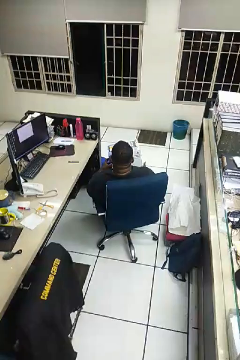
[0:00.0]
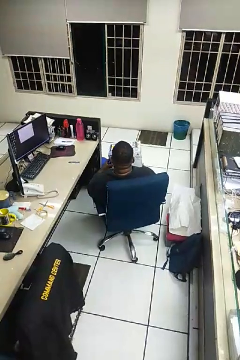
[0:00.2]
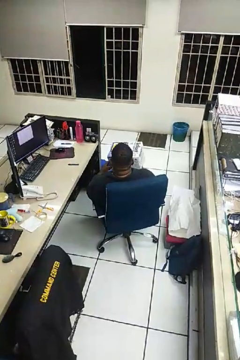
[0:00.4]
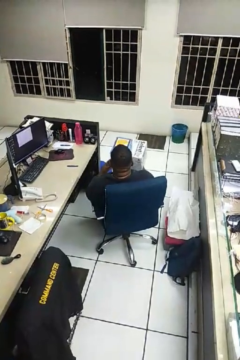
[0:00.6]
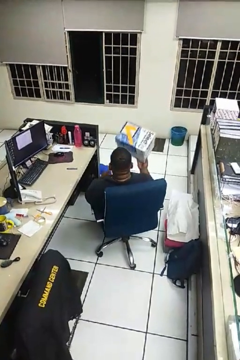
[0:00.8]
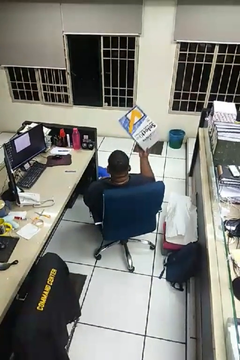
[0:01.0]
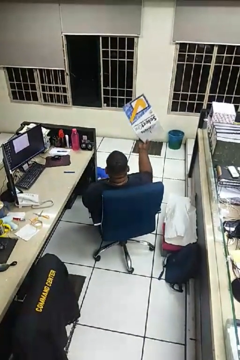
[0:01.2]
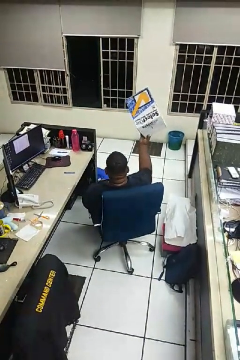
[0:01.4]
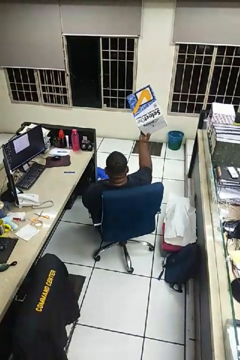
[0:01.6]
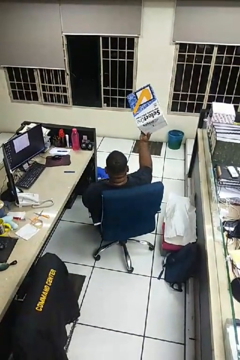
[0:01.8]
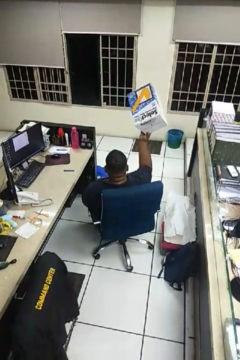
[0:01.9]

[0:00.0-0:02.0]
person holds object above head

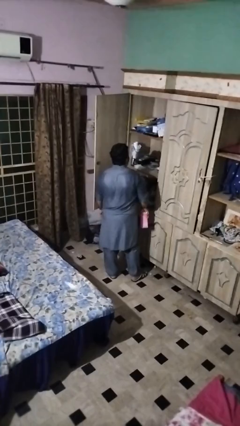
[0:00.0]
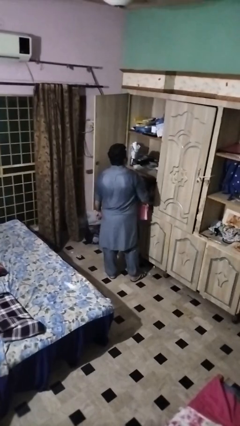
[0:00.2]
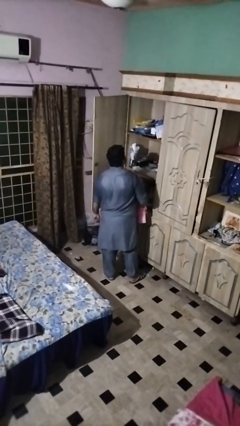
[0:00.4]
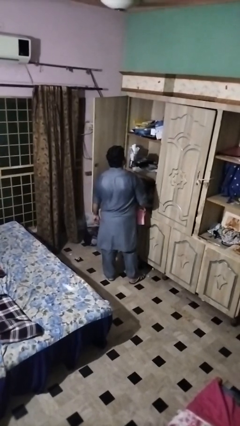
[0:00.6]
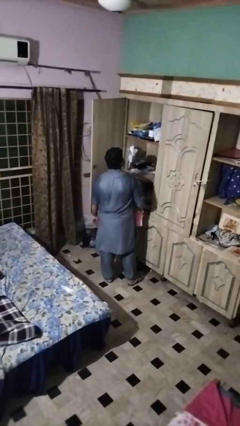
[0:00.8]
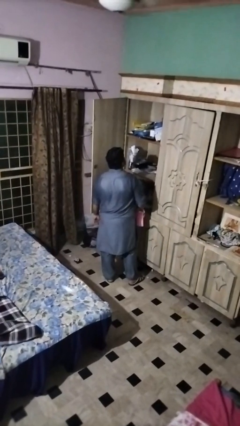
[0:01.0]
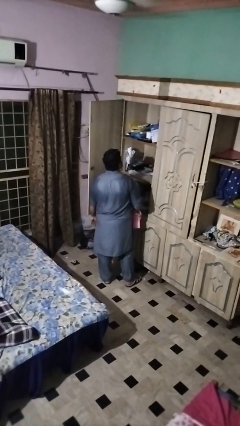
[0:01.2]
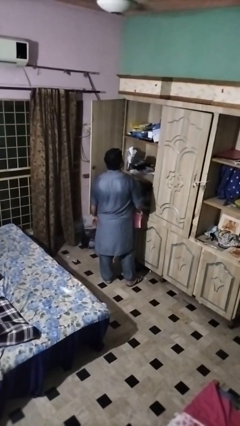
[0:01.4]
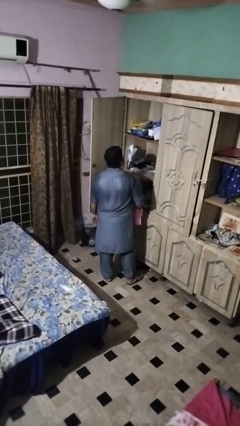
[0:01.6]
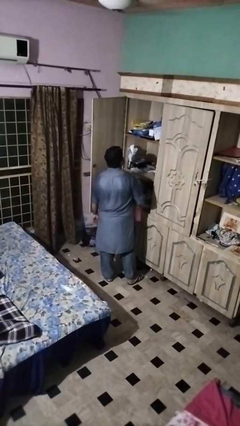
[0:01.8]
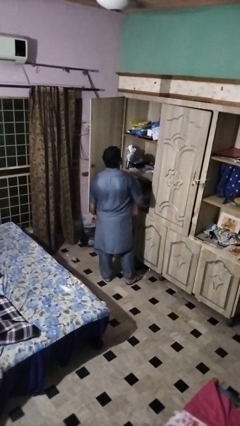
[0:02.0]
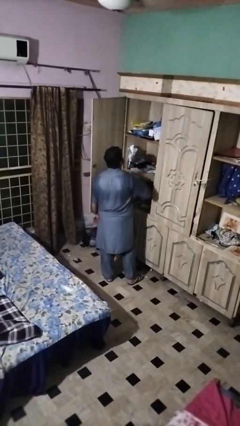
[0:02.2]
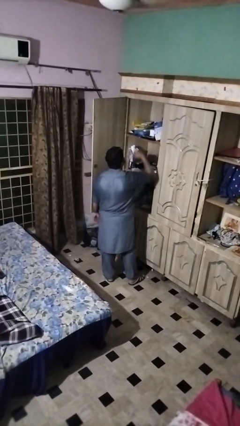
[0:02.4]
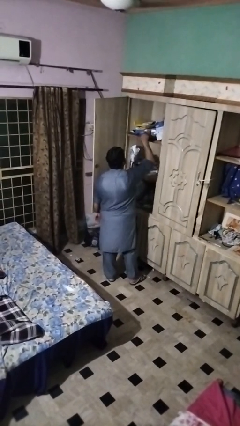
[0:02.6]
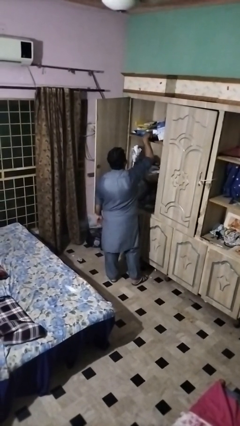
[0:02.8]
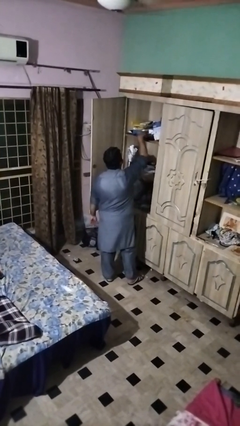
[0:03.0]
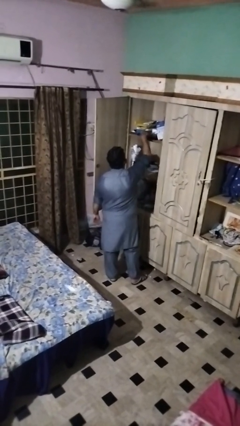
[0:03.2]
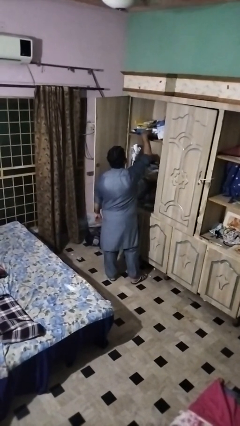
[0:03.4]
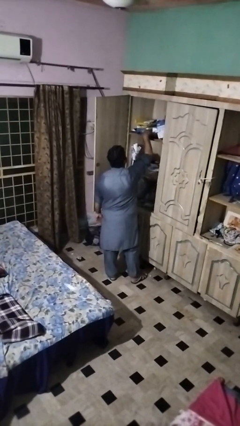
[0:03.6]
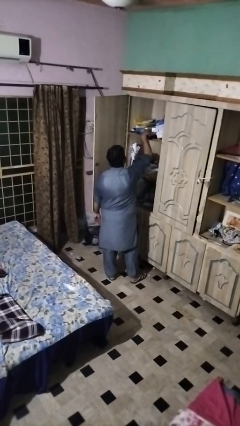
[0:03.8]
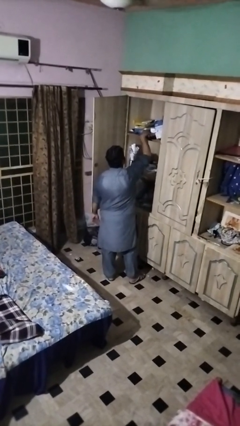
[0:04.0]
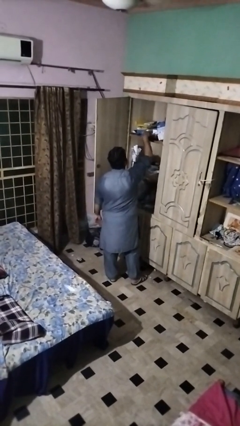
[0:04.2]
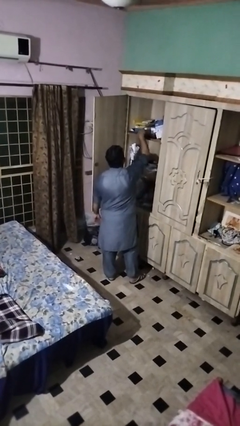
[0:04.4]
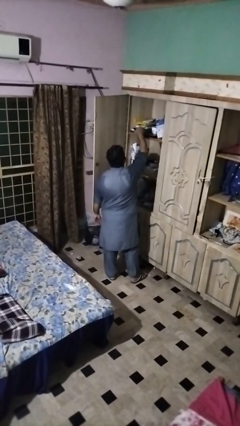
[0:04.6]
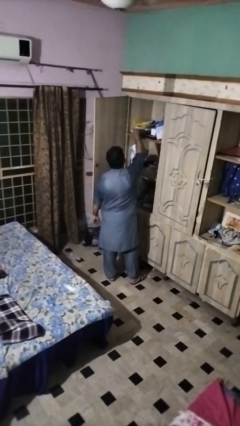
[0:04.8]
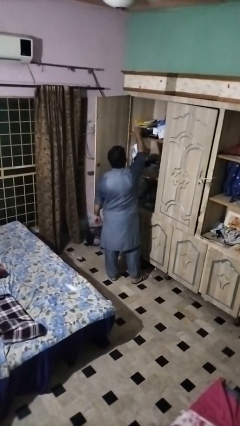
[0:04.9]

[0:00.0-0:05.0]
person dusts furniture

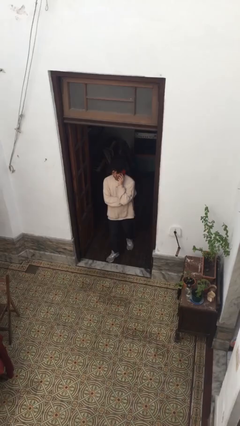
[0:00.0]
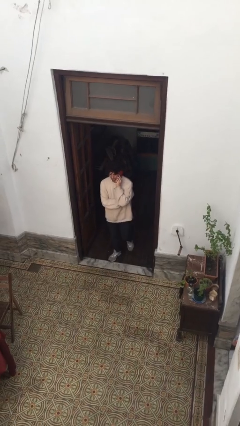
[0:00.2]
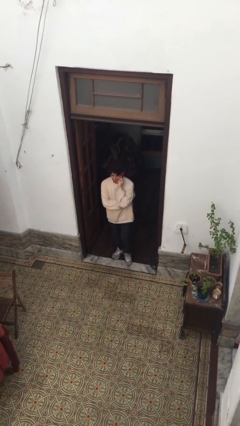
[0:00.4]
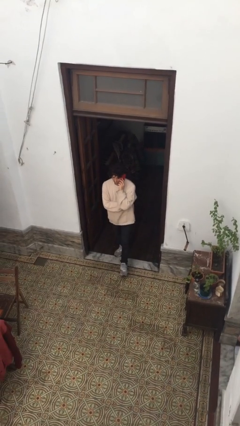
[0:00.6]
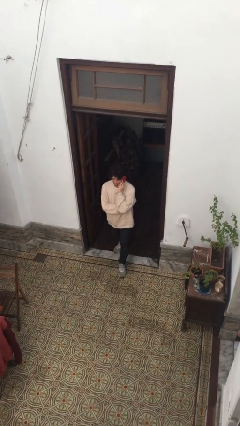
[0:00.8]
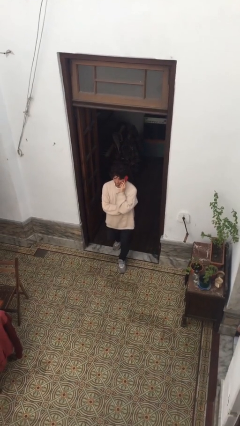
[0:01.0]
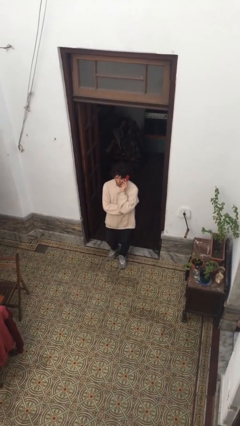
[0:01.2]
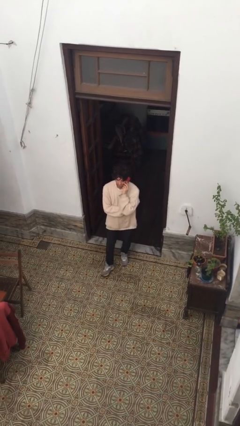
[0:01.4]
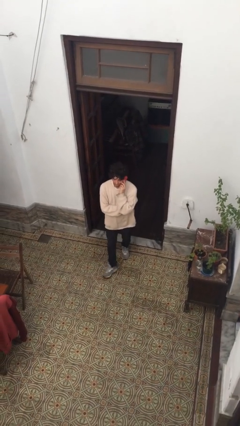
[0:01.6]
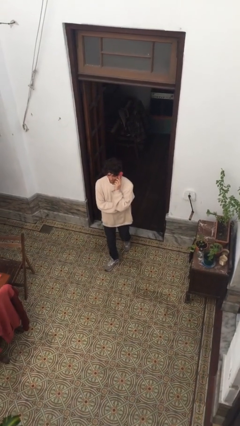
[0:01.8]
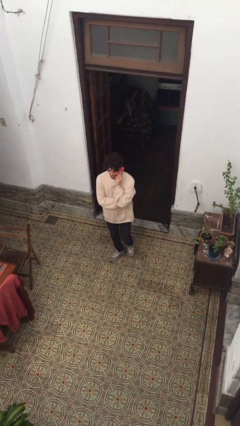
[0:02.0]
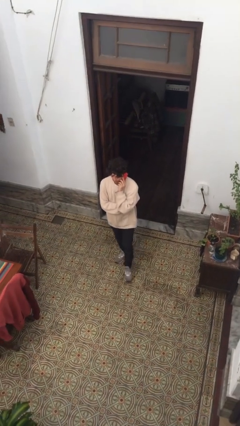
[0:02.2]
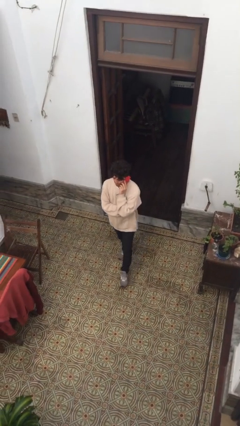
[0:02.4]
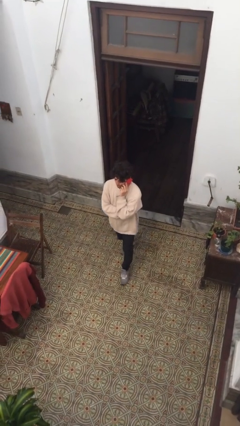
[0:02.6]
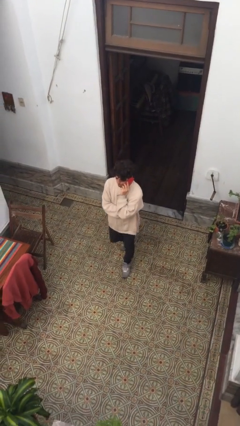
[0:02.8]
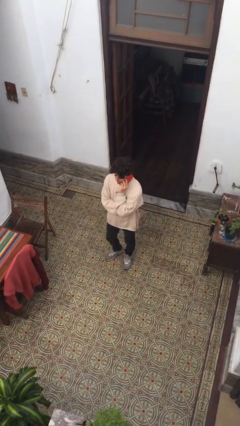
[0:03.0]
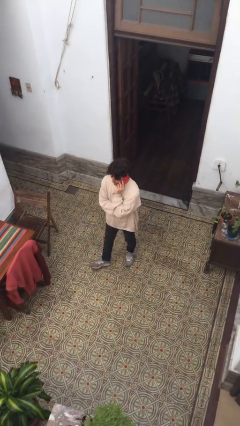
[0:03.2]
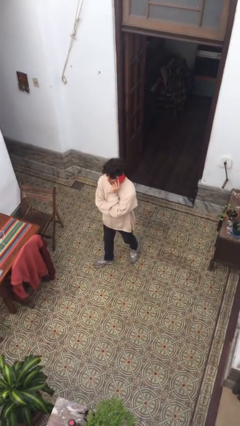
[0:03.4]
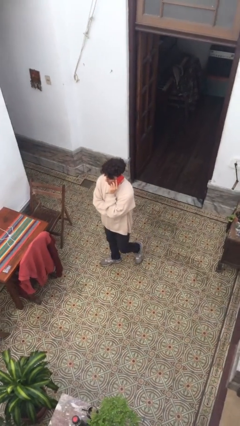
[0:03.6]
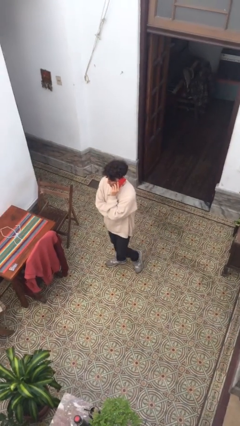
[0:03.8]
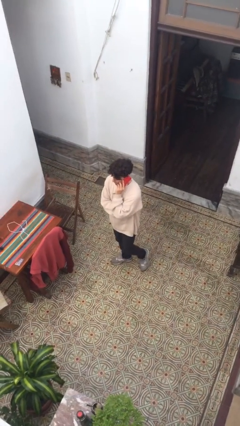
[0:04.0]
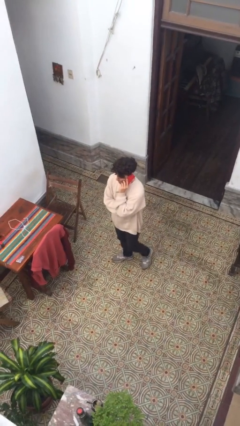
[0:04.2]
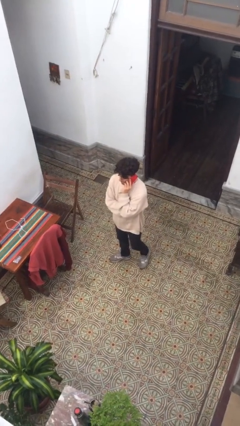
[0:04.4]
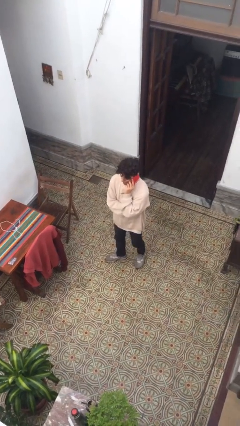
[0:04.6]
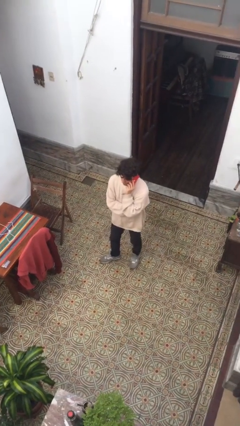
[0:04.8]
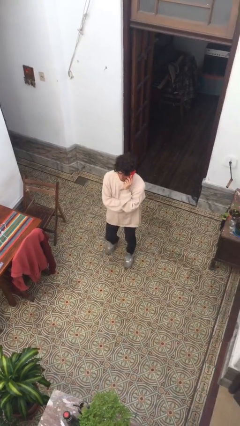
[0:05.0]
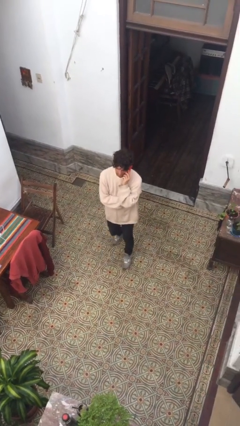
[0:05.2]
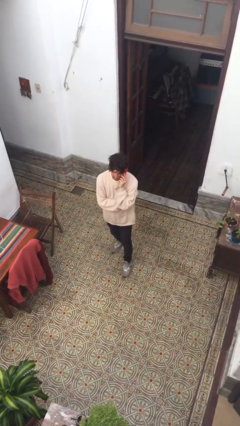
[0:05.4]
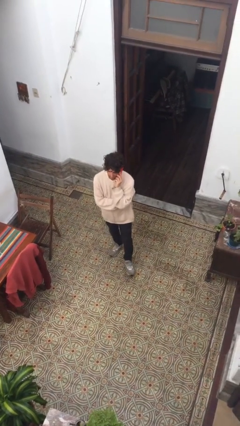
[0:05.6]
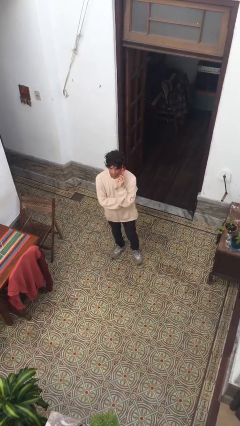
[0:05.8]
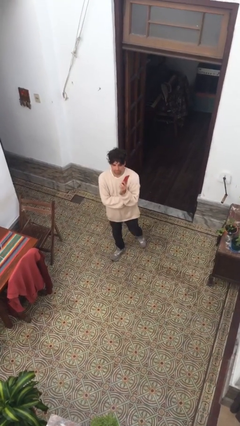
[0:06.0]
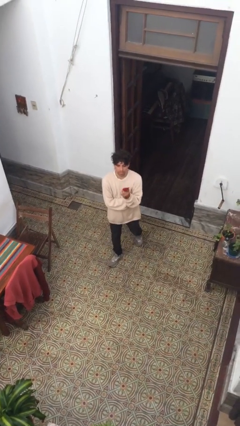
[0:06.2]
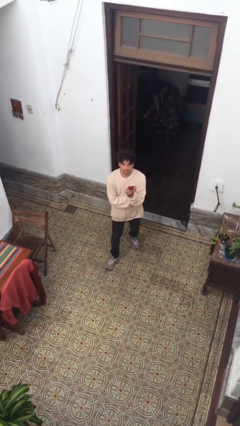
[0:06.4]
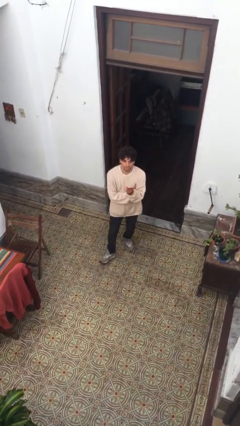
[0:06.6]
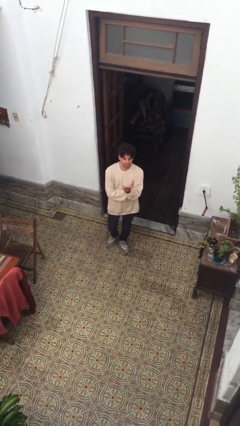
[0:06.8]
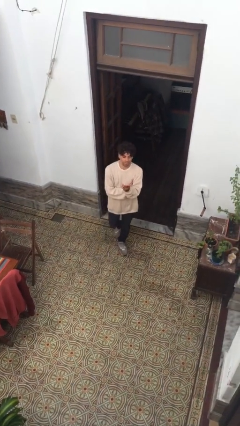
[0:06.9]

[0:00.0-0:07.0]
person enters scene through structure

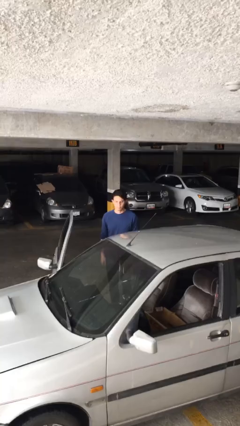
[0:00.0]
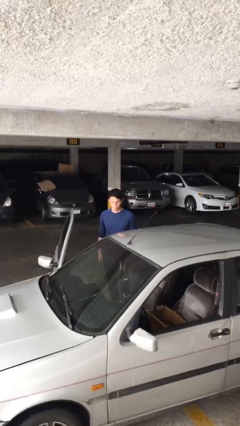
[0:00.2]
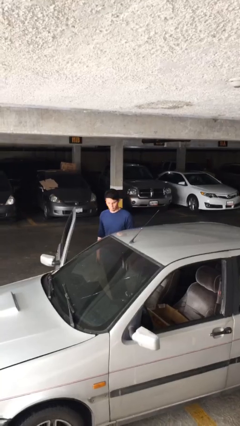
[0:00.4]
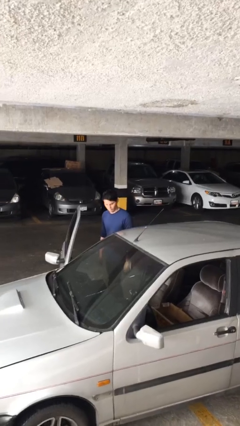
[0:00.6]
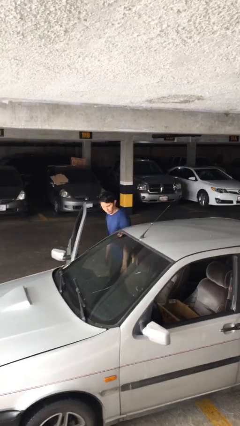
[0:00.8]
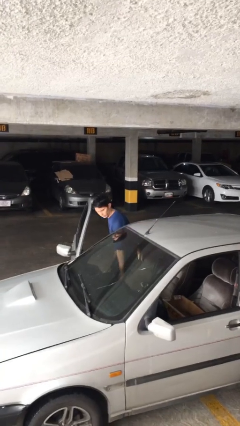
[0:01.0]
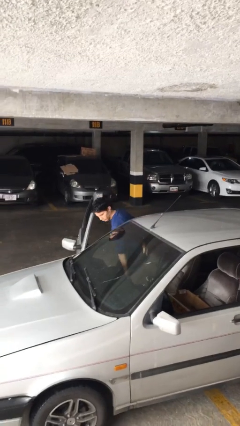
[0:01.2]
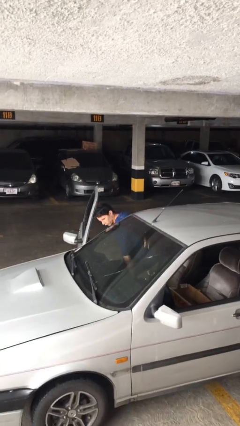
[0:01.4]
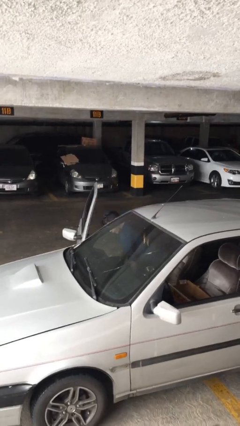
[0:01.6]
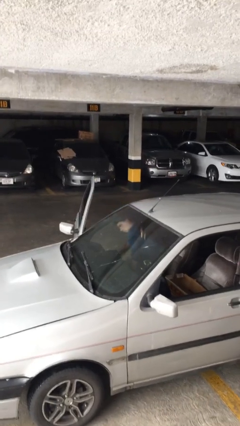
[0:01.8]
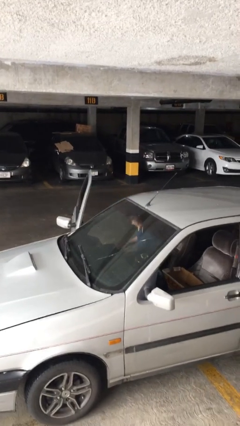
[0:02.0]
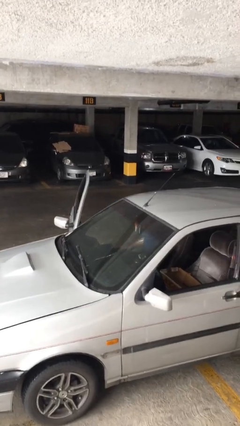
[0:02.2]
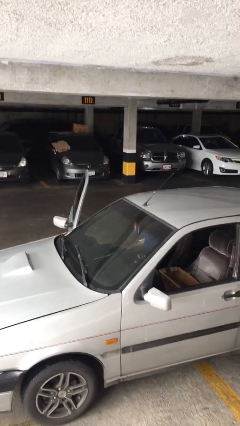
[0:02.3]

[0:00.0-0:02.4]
person enters car

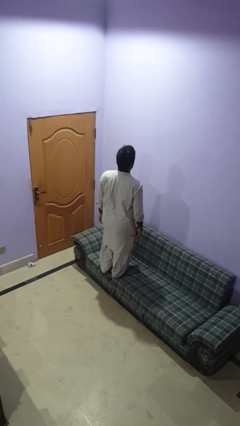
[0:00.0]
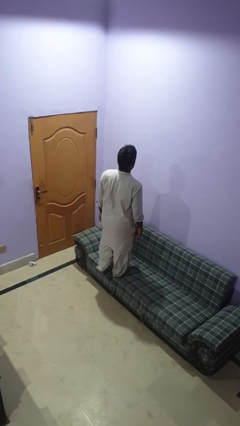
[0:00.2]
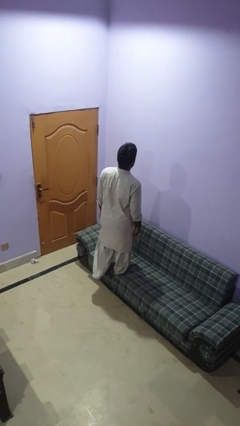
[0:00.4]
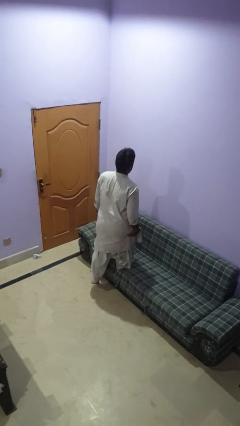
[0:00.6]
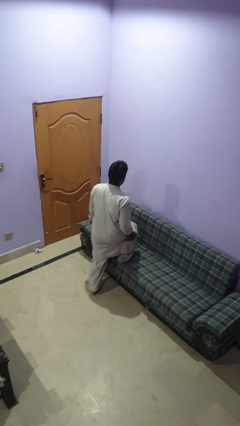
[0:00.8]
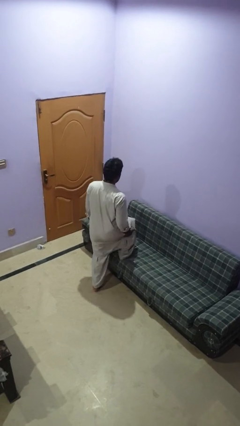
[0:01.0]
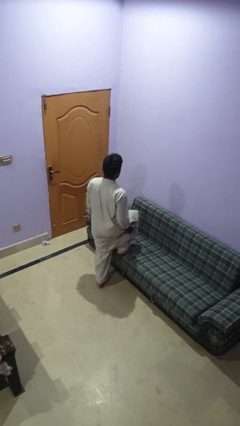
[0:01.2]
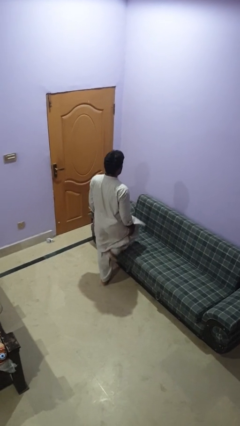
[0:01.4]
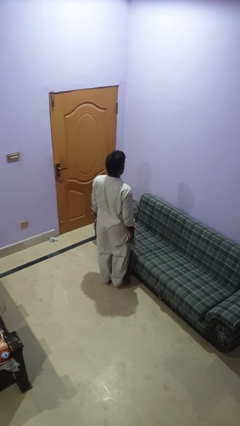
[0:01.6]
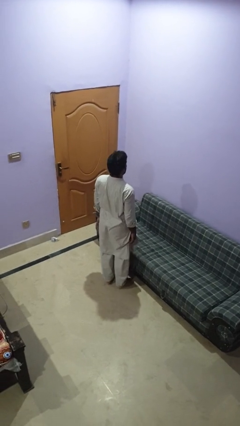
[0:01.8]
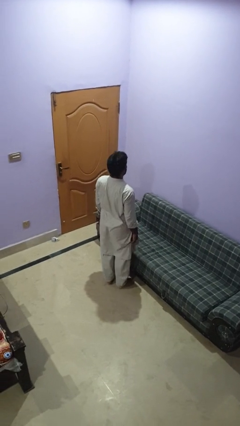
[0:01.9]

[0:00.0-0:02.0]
person climbs off couch
